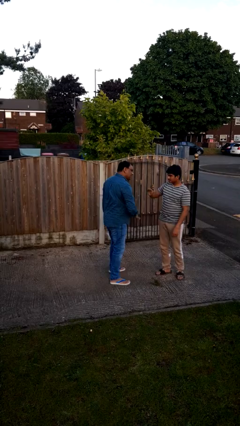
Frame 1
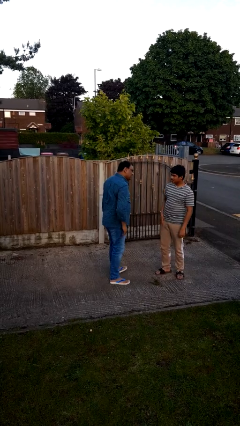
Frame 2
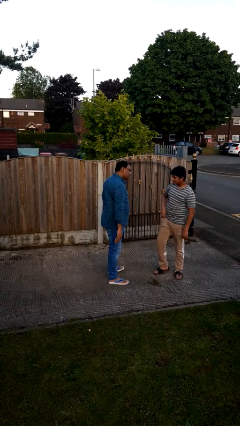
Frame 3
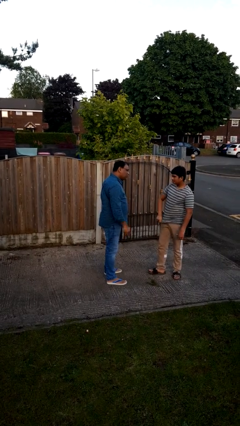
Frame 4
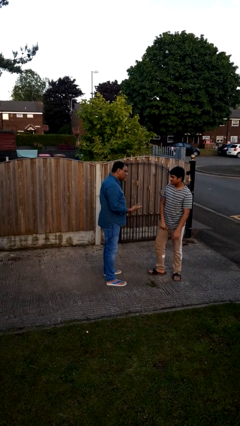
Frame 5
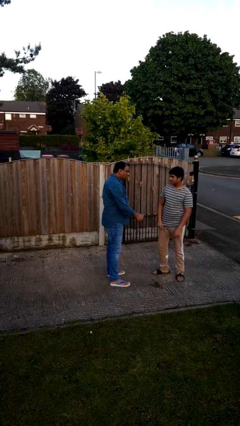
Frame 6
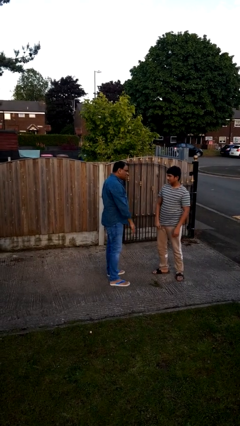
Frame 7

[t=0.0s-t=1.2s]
person highfives hand

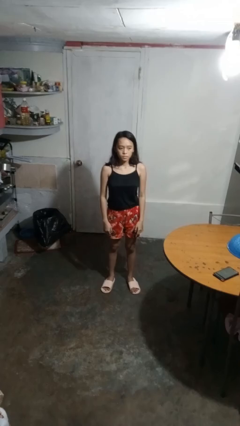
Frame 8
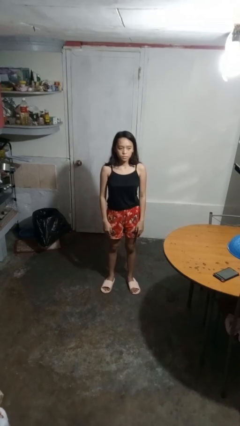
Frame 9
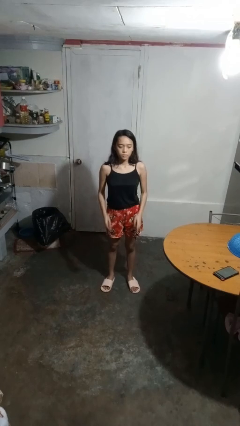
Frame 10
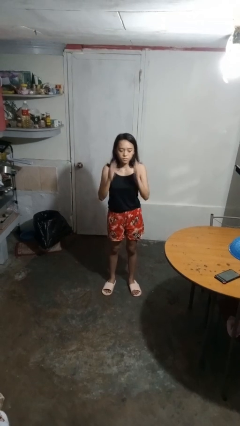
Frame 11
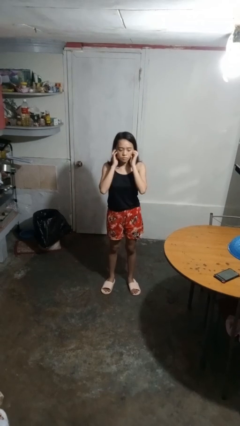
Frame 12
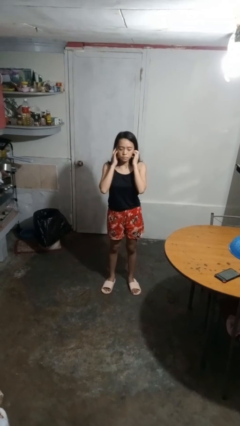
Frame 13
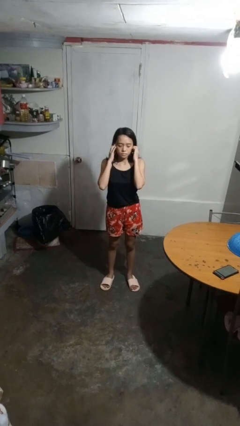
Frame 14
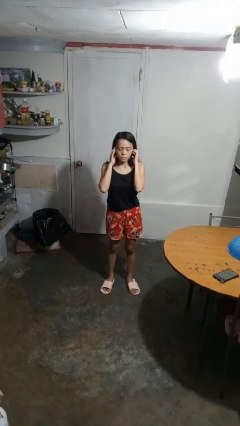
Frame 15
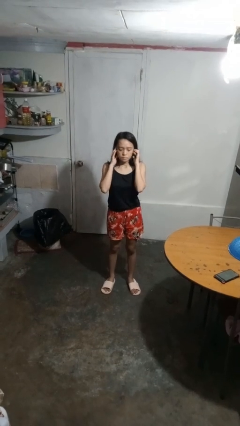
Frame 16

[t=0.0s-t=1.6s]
person puts fingers in ear

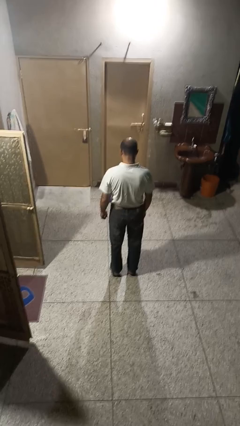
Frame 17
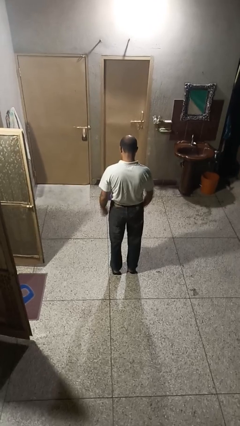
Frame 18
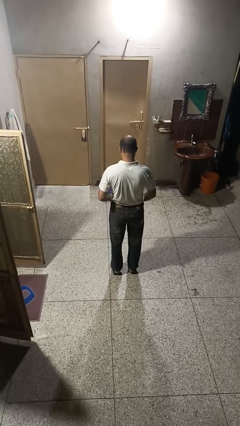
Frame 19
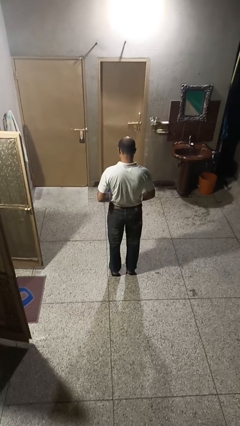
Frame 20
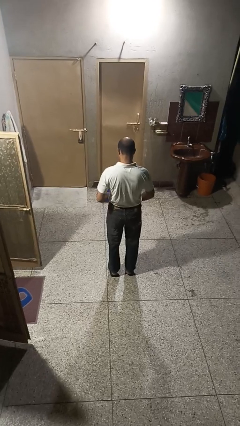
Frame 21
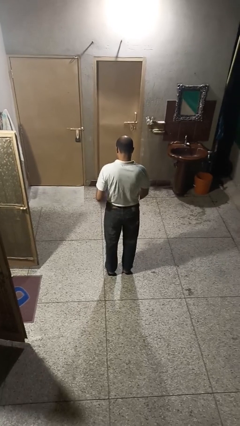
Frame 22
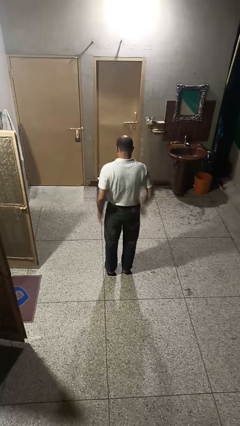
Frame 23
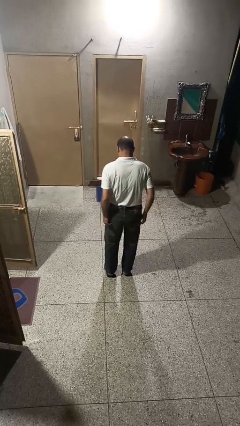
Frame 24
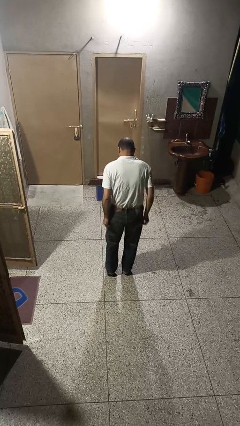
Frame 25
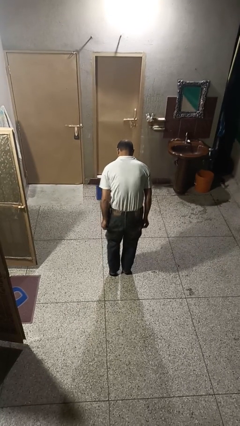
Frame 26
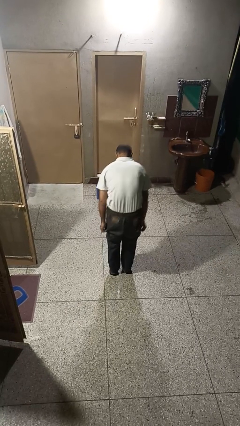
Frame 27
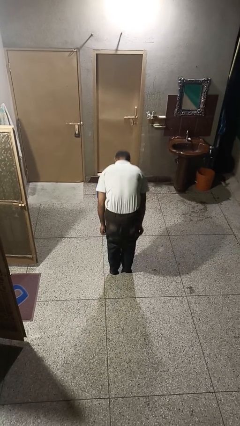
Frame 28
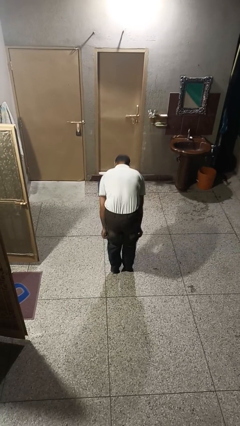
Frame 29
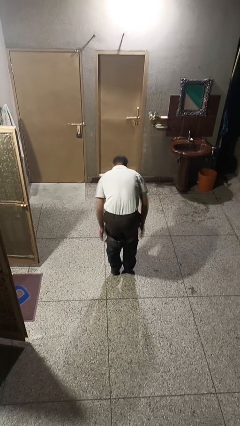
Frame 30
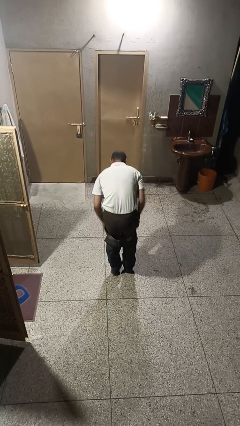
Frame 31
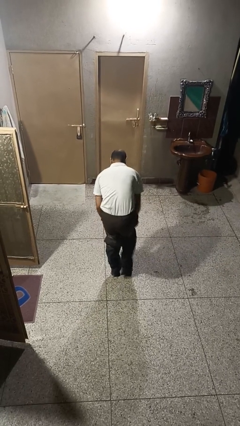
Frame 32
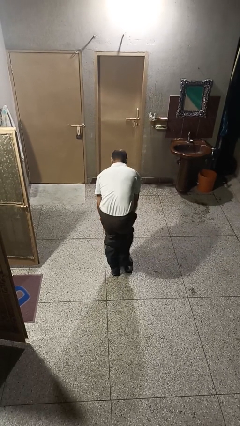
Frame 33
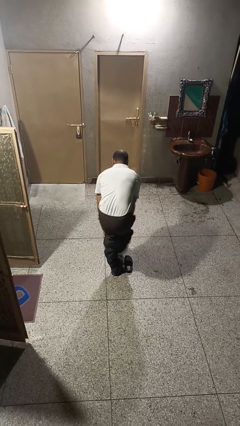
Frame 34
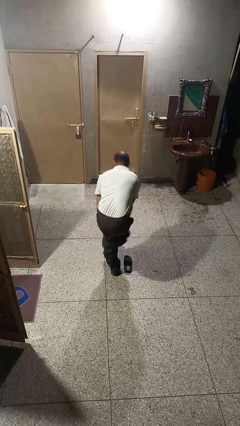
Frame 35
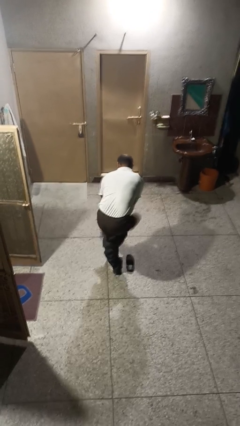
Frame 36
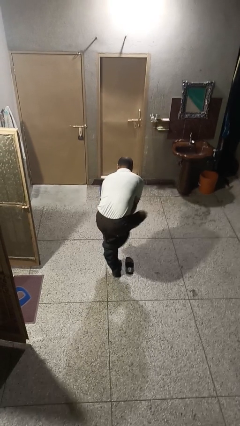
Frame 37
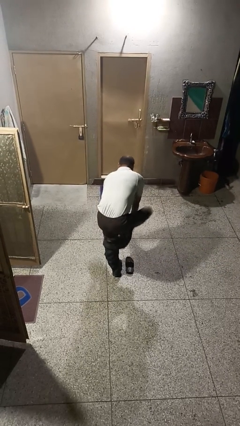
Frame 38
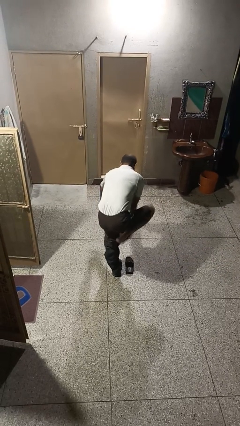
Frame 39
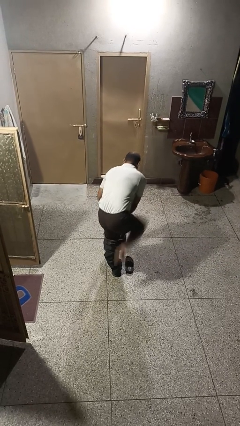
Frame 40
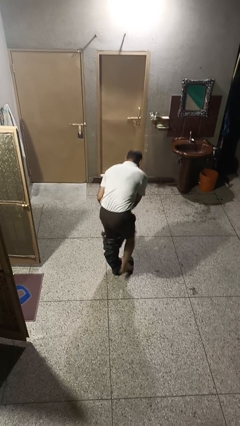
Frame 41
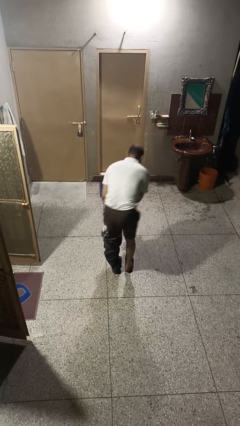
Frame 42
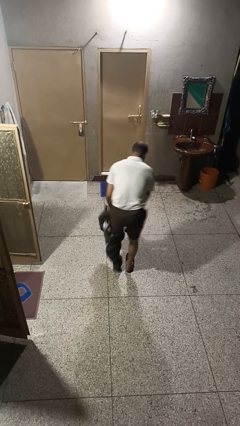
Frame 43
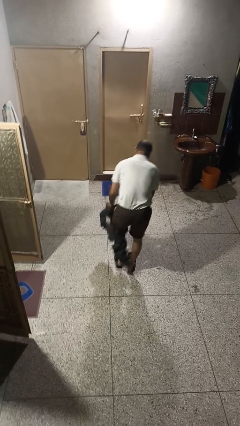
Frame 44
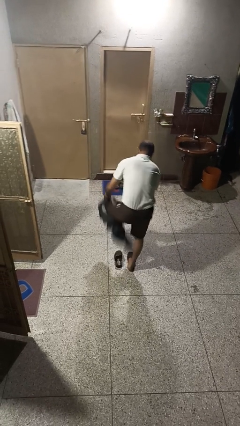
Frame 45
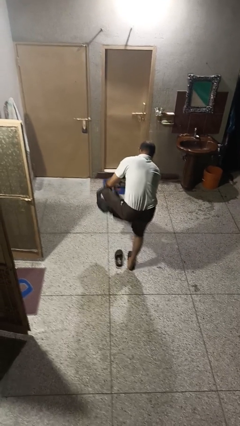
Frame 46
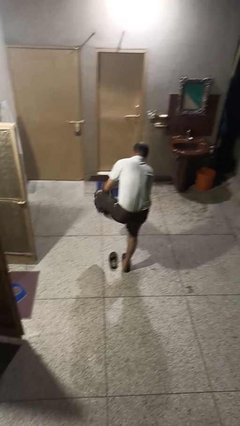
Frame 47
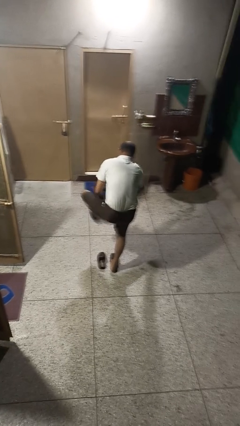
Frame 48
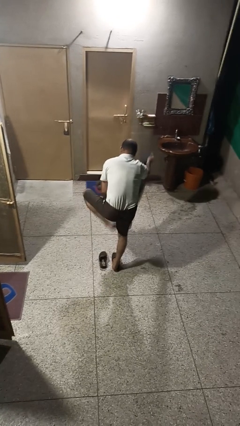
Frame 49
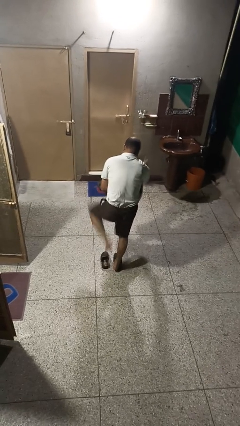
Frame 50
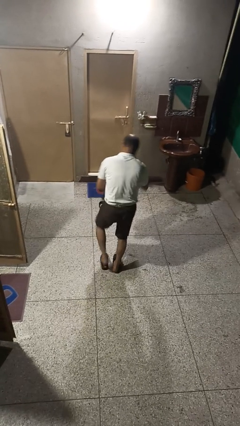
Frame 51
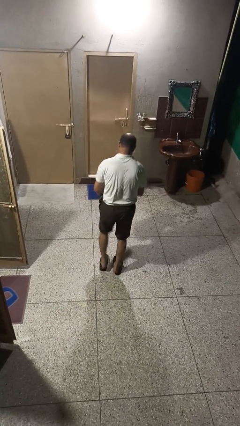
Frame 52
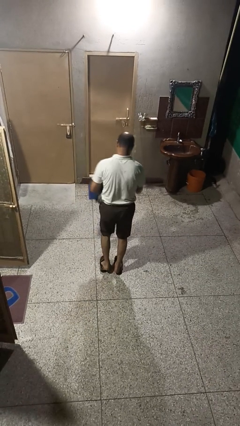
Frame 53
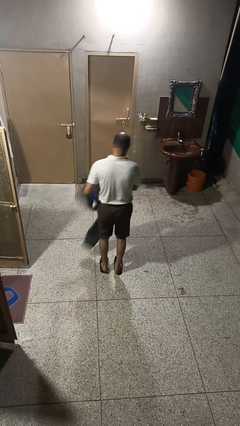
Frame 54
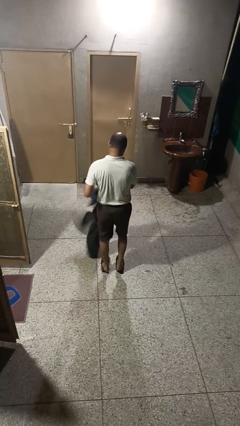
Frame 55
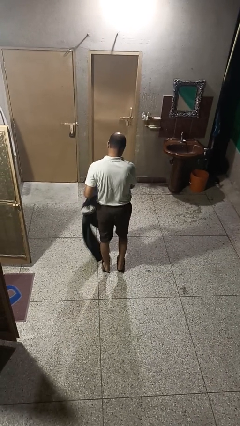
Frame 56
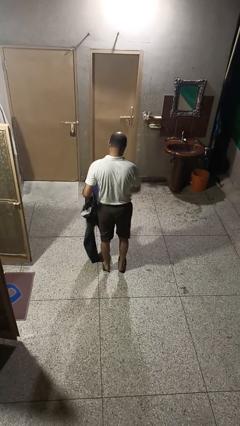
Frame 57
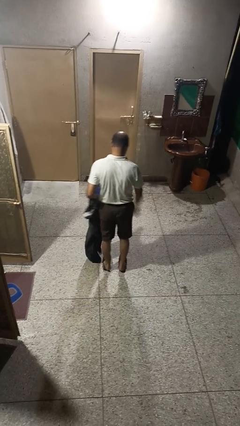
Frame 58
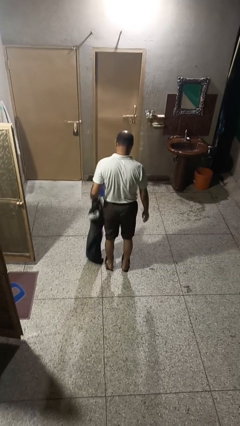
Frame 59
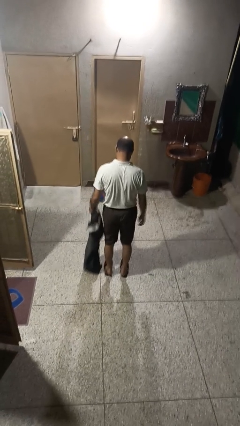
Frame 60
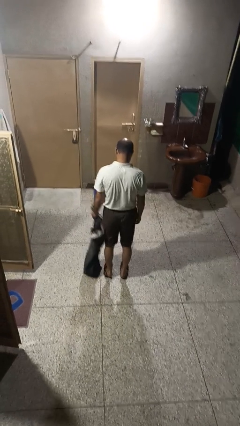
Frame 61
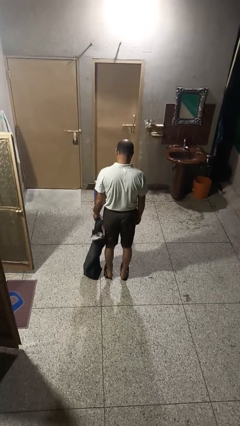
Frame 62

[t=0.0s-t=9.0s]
person takes off pants

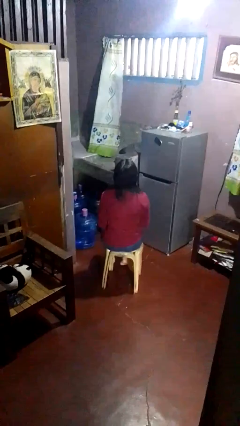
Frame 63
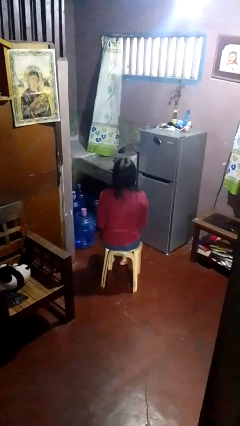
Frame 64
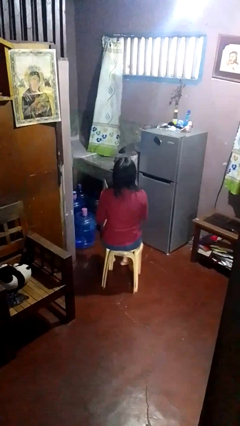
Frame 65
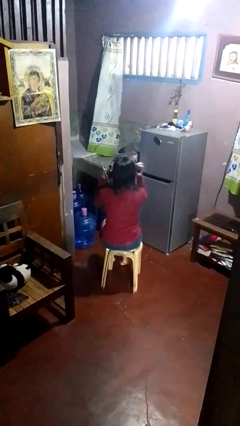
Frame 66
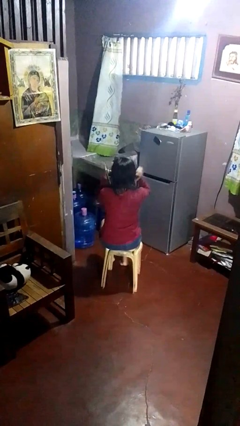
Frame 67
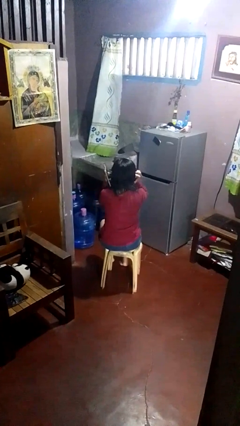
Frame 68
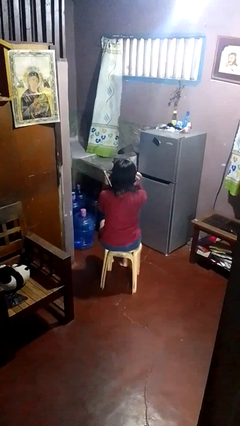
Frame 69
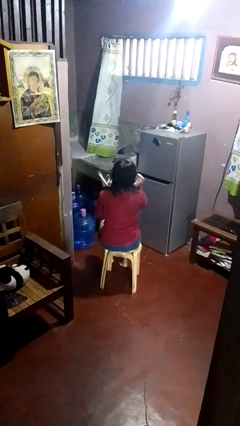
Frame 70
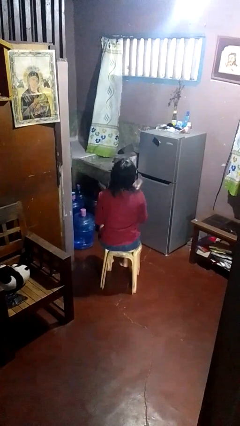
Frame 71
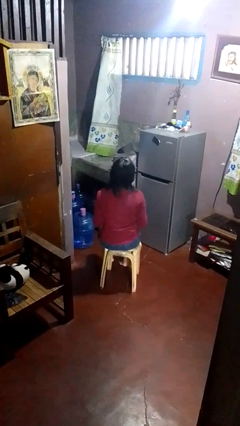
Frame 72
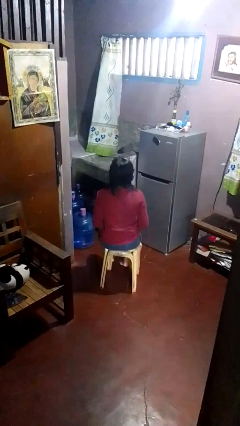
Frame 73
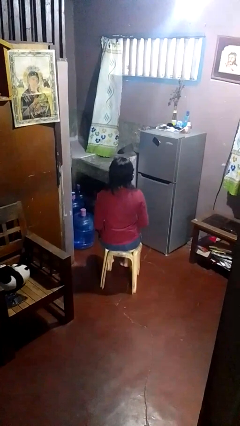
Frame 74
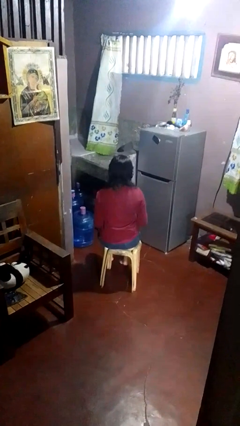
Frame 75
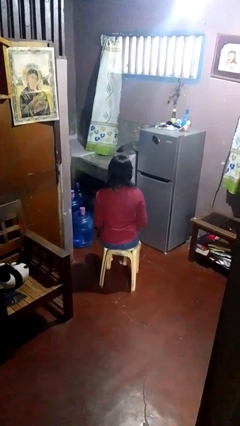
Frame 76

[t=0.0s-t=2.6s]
person puts on headphones

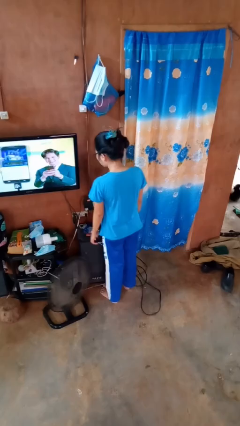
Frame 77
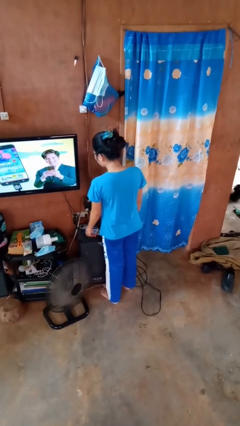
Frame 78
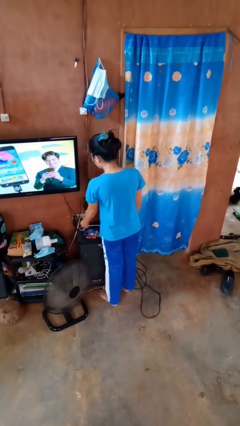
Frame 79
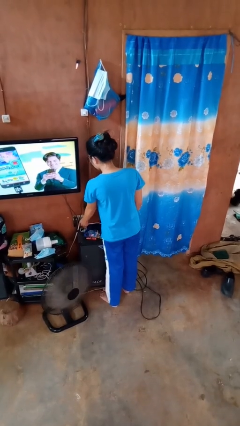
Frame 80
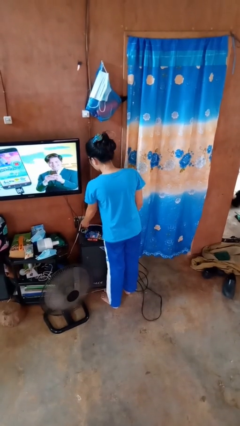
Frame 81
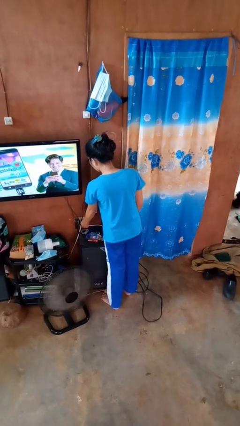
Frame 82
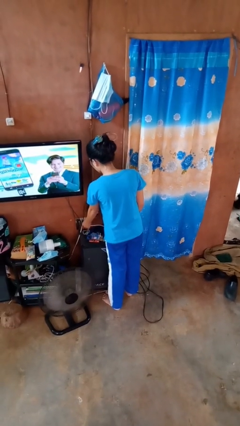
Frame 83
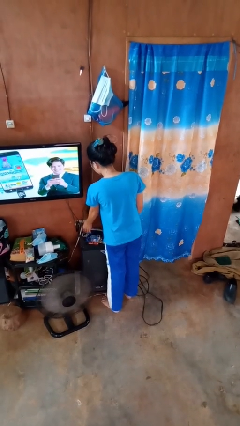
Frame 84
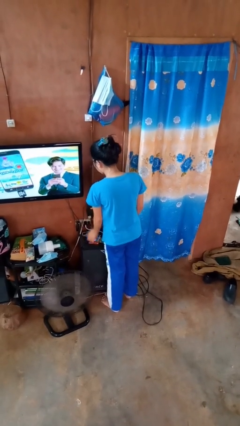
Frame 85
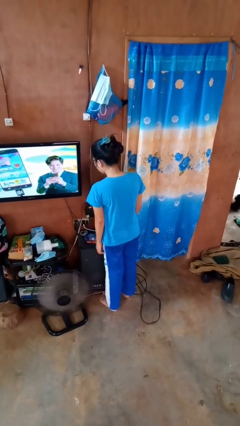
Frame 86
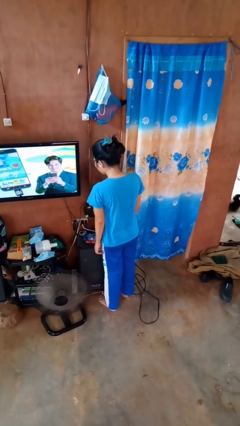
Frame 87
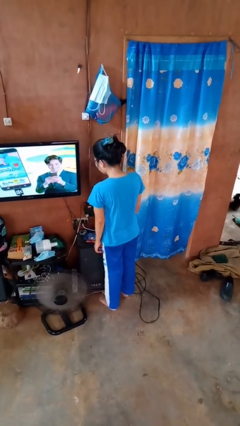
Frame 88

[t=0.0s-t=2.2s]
person plugs into electrical socket

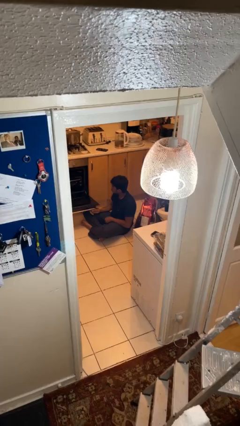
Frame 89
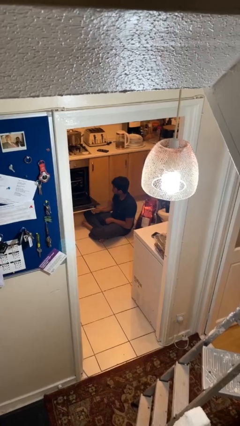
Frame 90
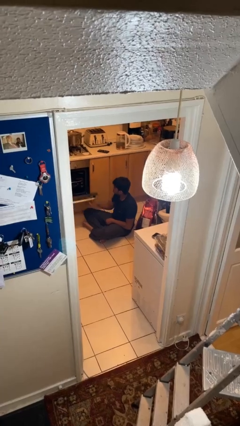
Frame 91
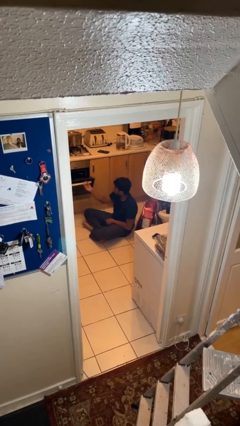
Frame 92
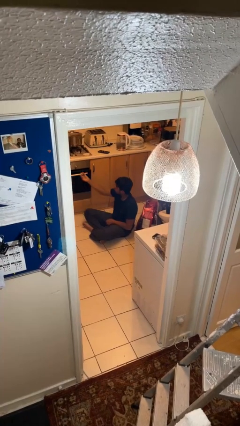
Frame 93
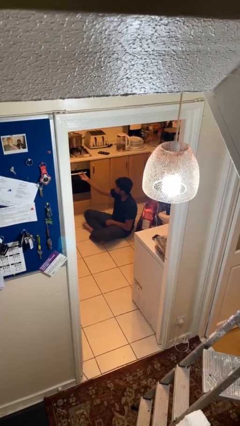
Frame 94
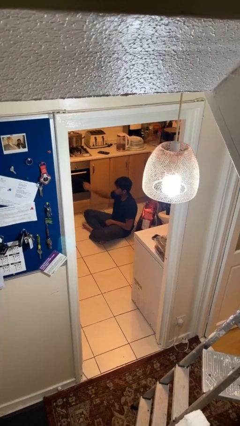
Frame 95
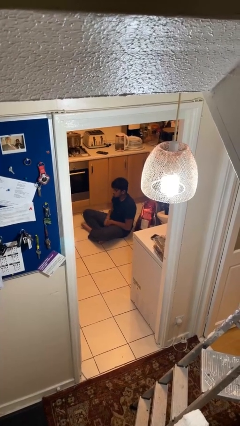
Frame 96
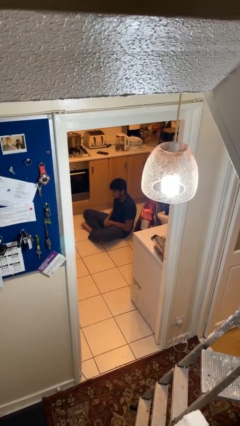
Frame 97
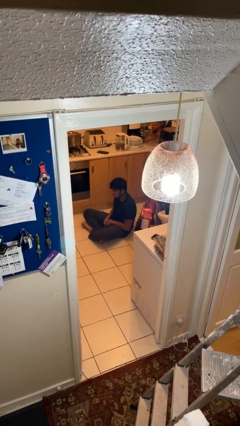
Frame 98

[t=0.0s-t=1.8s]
person closes oven door
